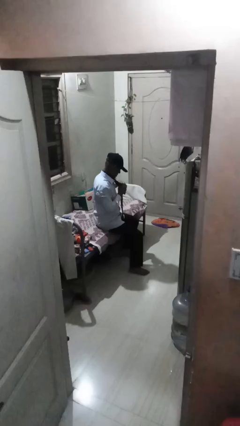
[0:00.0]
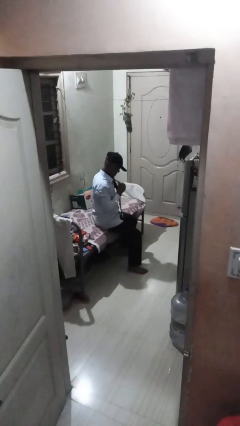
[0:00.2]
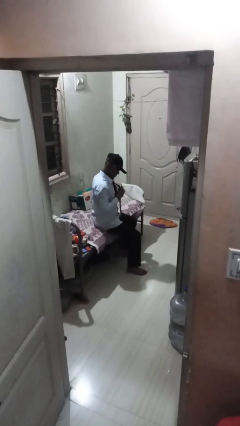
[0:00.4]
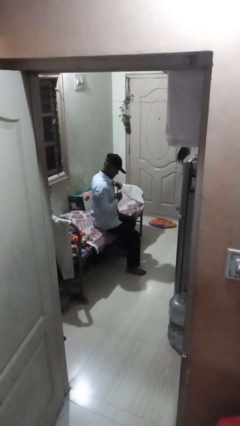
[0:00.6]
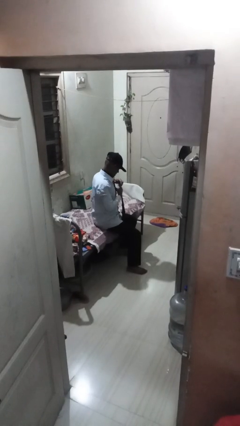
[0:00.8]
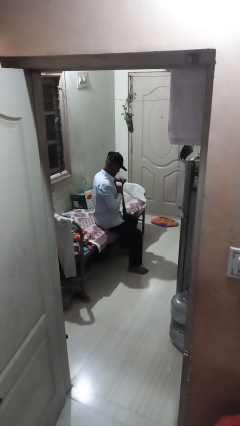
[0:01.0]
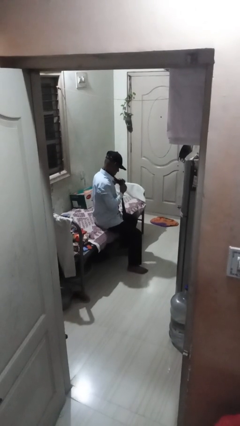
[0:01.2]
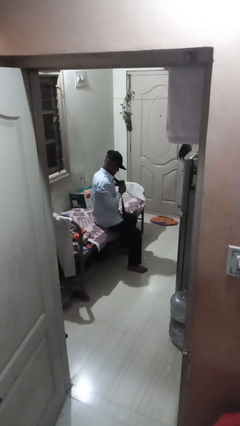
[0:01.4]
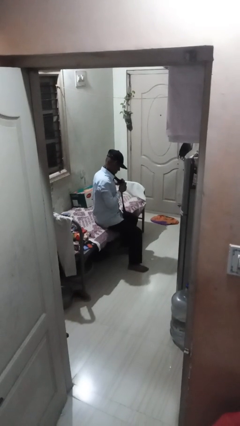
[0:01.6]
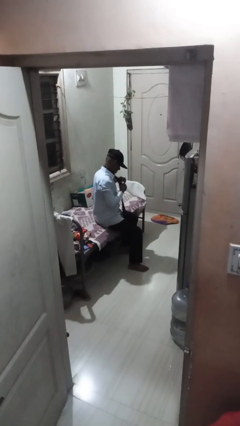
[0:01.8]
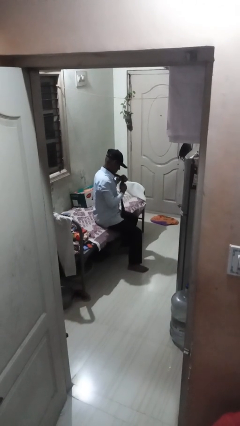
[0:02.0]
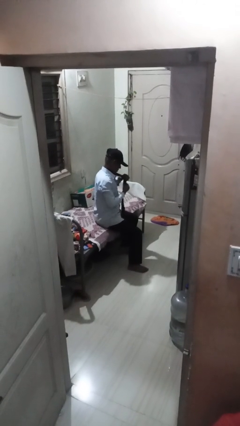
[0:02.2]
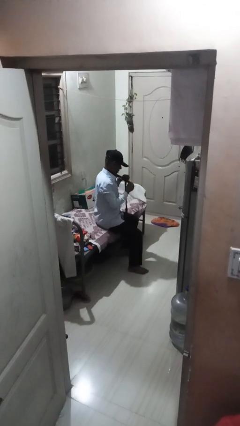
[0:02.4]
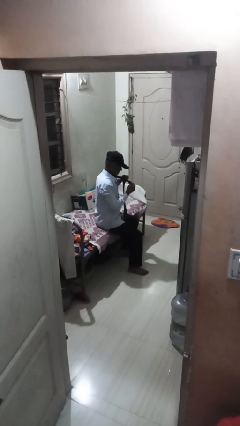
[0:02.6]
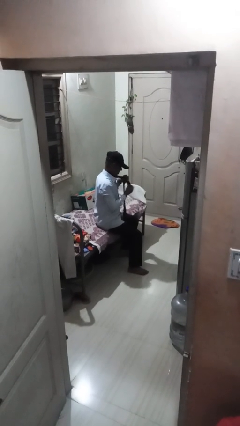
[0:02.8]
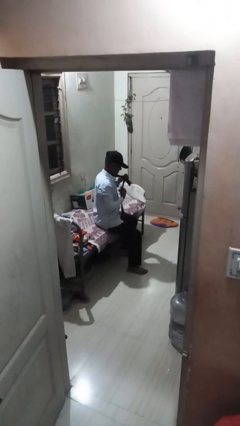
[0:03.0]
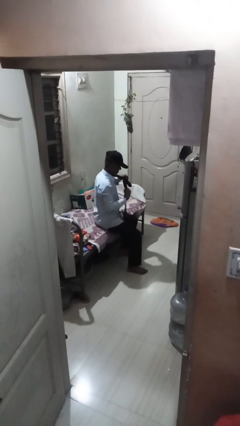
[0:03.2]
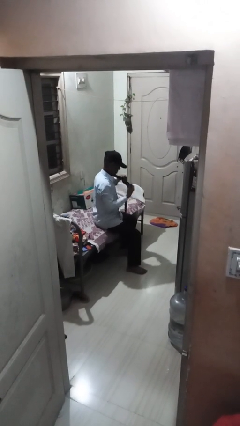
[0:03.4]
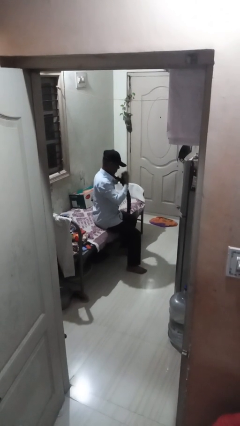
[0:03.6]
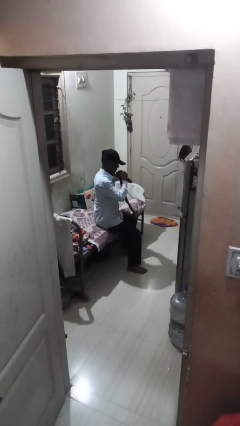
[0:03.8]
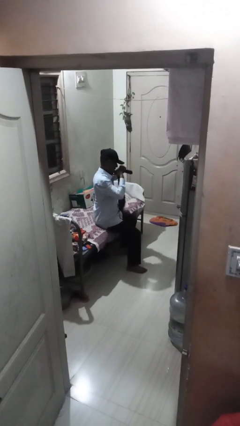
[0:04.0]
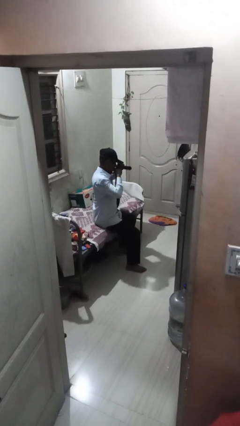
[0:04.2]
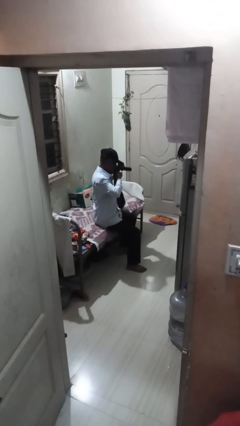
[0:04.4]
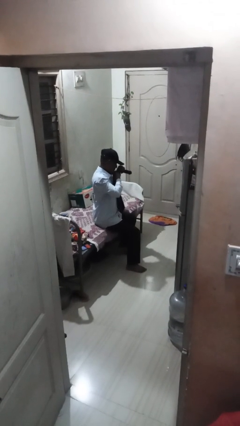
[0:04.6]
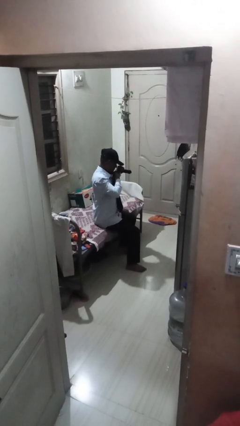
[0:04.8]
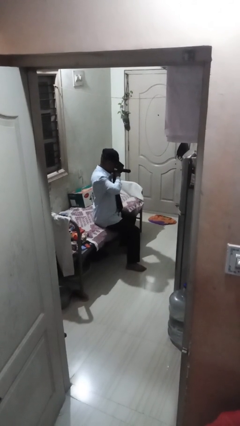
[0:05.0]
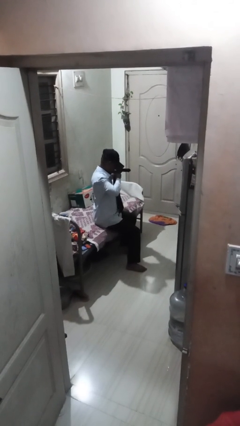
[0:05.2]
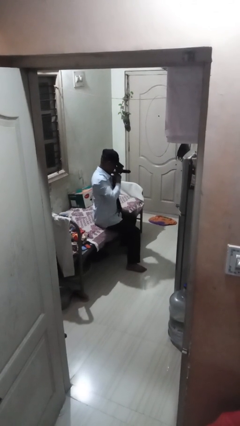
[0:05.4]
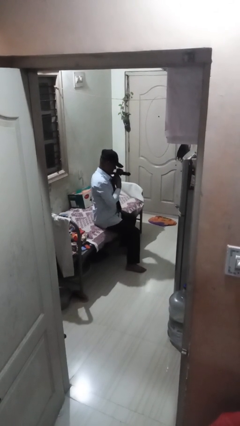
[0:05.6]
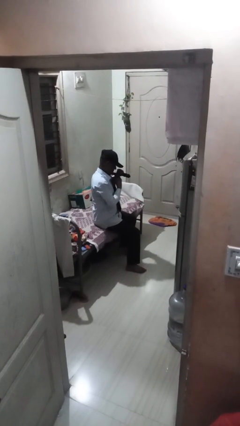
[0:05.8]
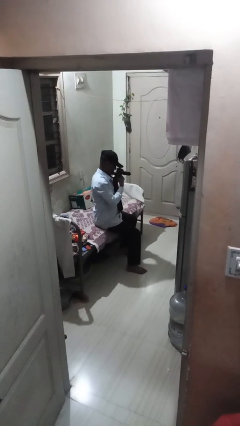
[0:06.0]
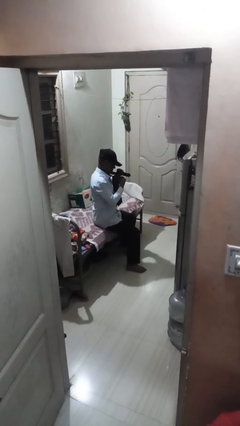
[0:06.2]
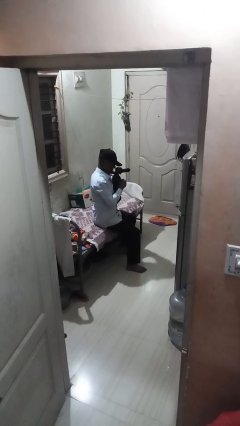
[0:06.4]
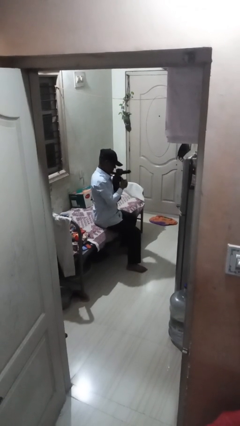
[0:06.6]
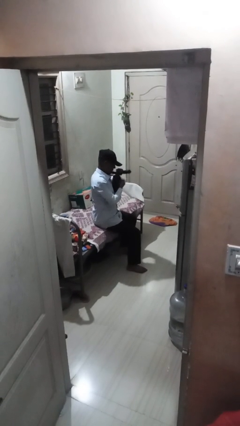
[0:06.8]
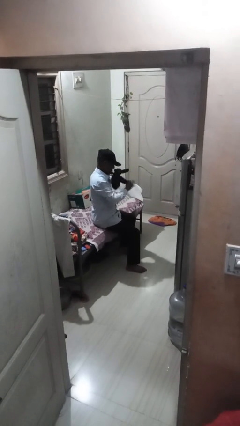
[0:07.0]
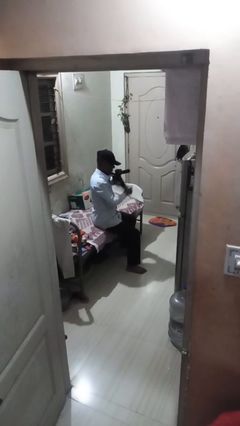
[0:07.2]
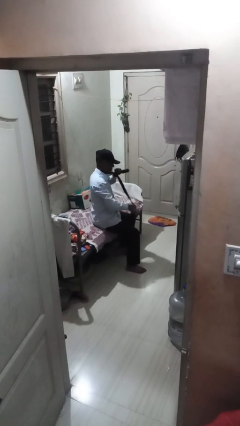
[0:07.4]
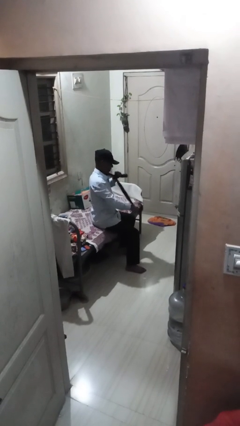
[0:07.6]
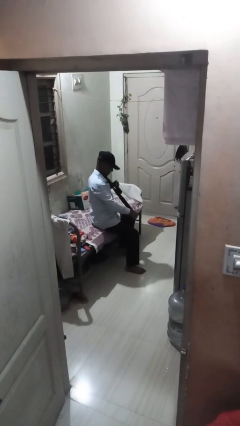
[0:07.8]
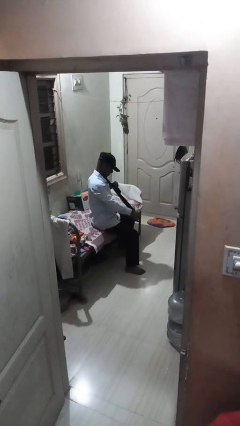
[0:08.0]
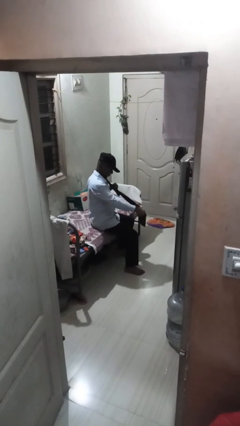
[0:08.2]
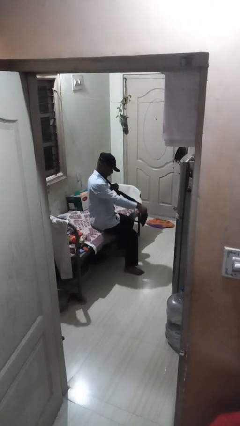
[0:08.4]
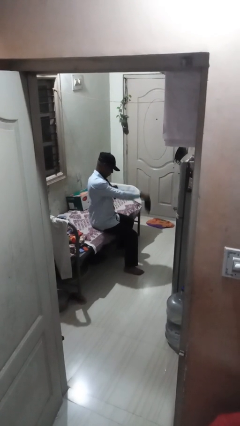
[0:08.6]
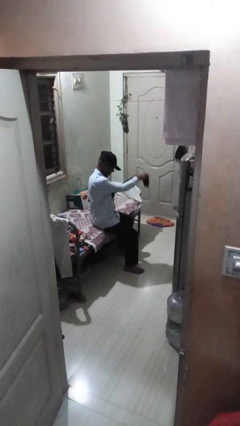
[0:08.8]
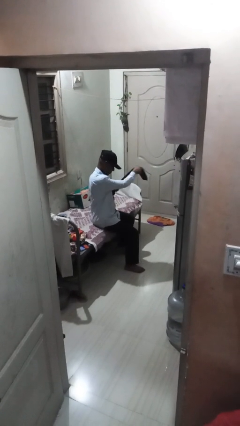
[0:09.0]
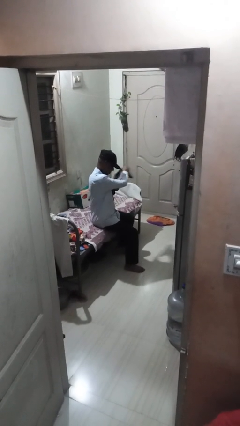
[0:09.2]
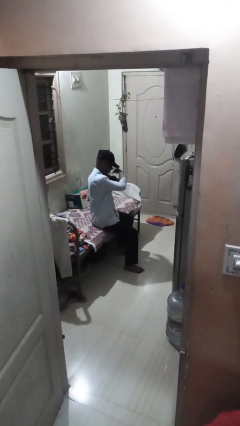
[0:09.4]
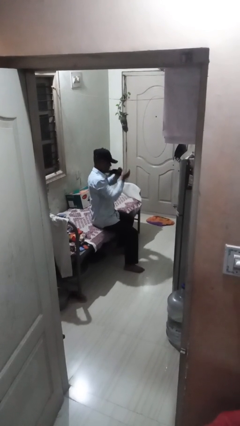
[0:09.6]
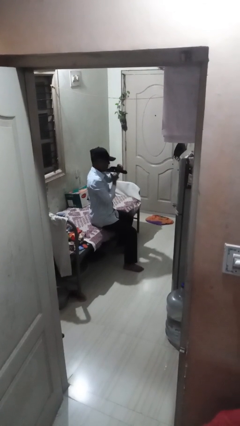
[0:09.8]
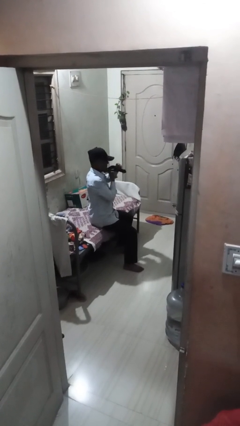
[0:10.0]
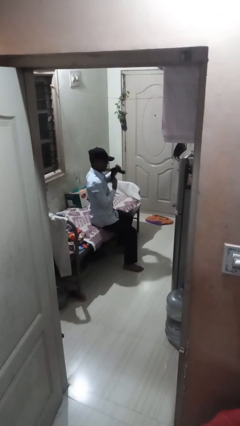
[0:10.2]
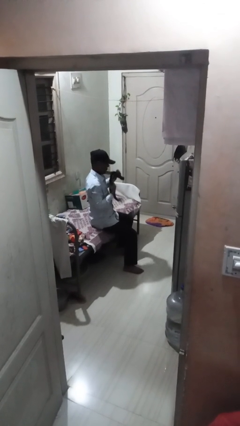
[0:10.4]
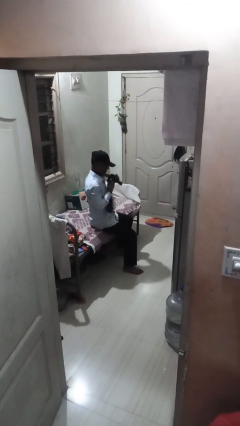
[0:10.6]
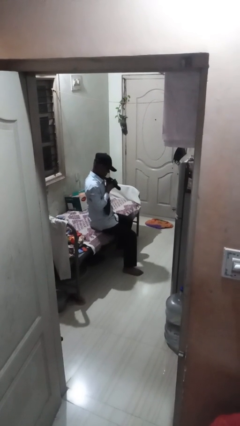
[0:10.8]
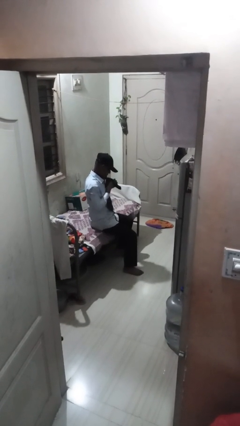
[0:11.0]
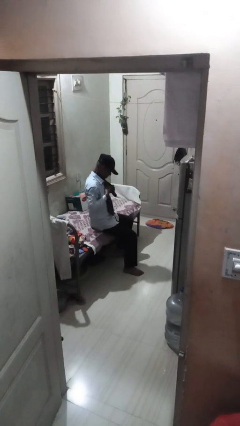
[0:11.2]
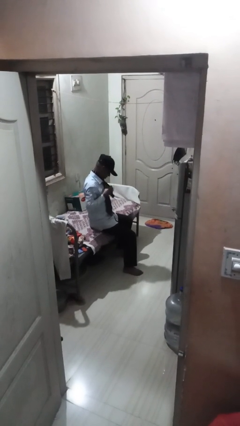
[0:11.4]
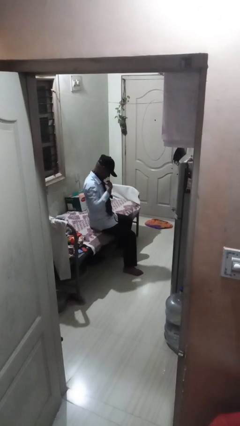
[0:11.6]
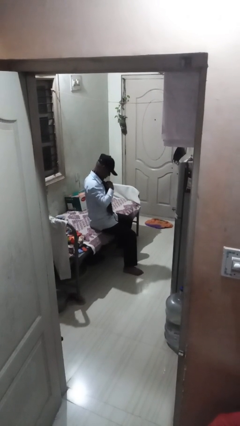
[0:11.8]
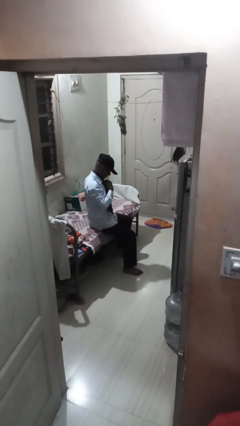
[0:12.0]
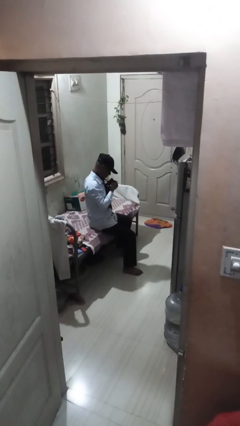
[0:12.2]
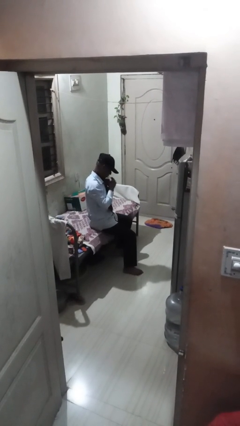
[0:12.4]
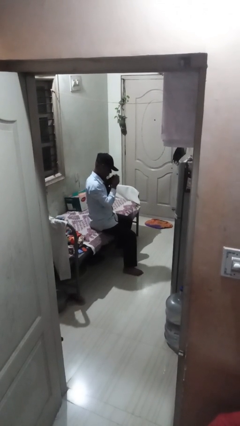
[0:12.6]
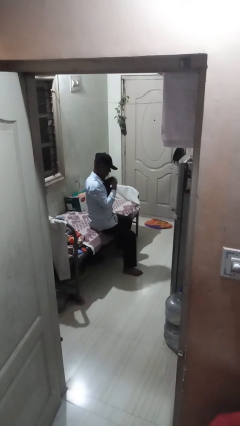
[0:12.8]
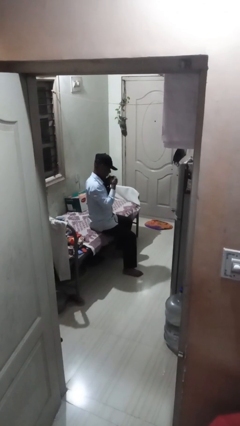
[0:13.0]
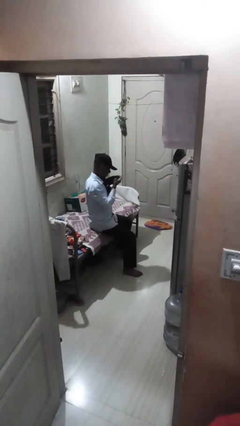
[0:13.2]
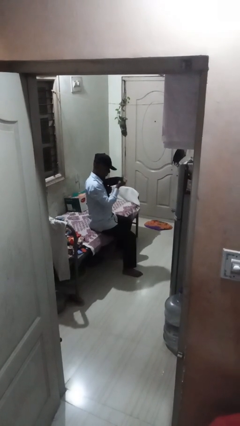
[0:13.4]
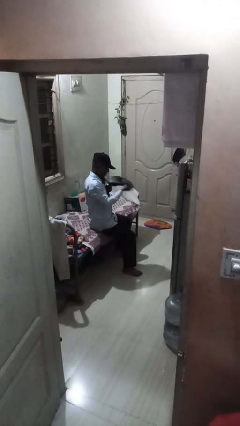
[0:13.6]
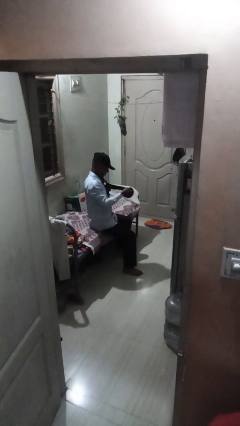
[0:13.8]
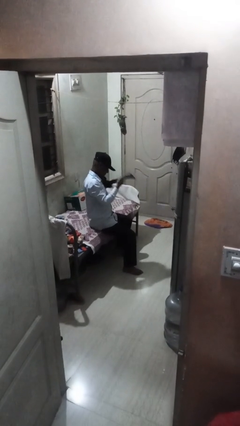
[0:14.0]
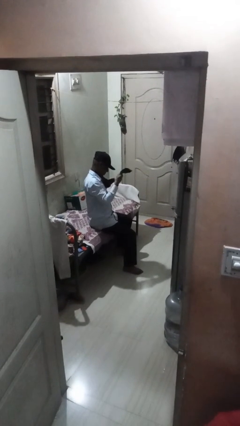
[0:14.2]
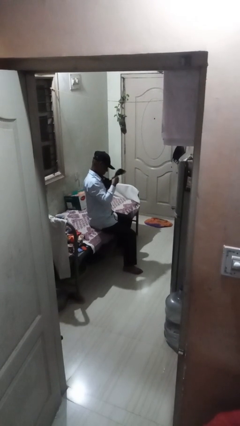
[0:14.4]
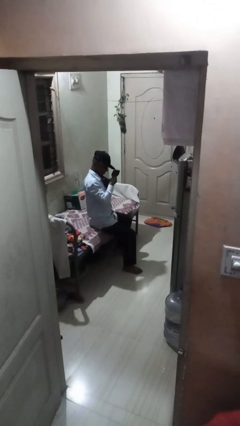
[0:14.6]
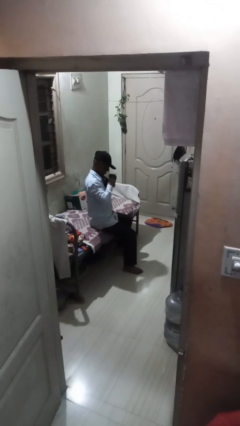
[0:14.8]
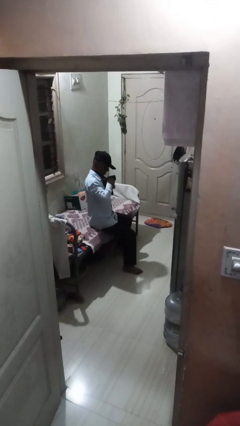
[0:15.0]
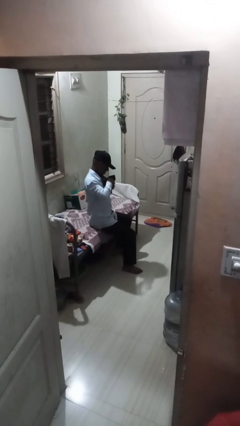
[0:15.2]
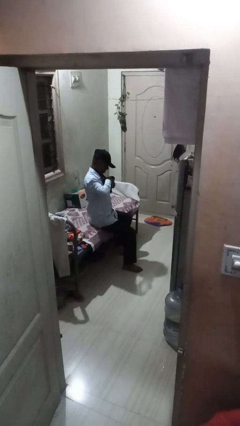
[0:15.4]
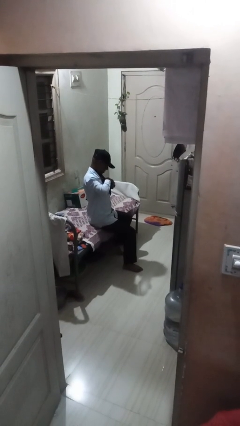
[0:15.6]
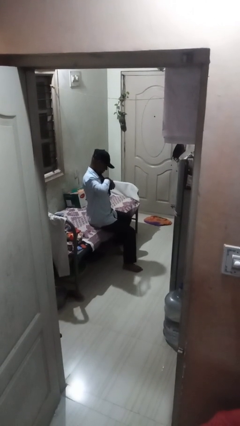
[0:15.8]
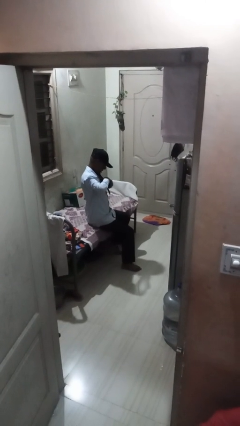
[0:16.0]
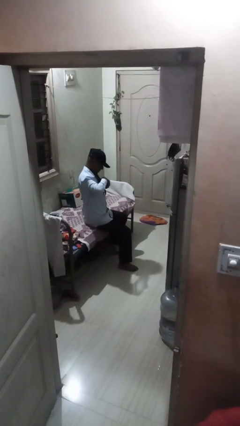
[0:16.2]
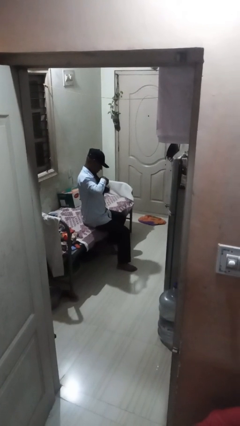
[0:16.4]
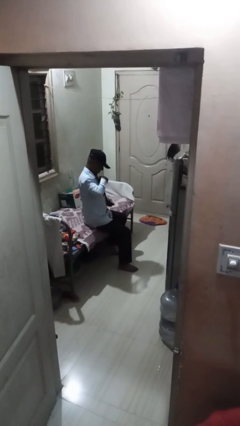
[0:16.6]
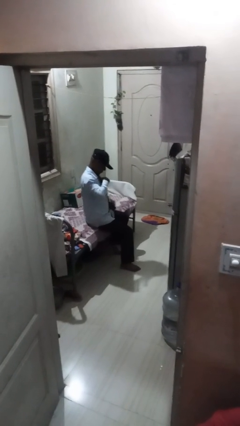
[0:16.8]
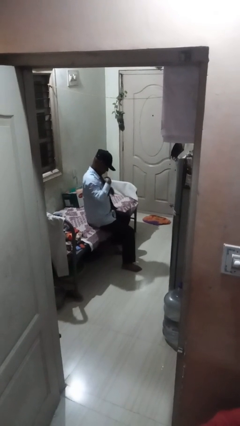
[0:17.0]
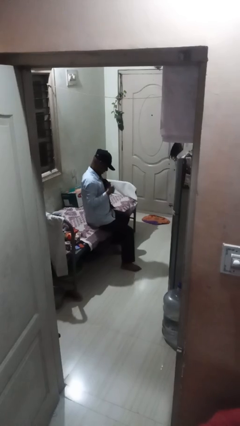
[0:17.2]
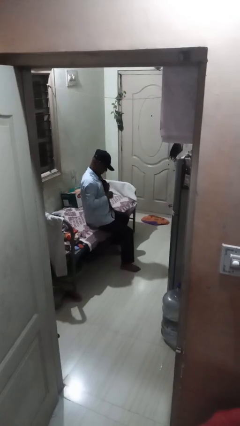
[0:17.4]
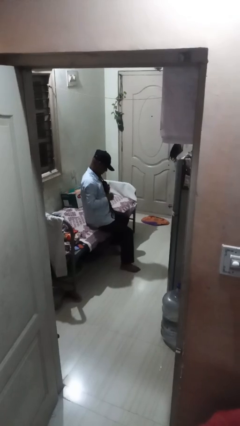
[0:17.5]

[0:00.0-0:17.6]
person puts on necktie

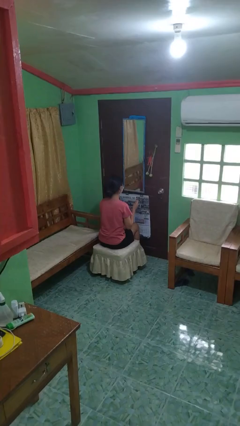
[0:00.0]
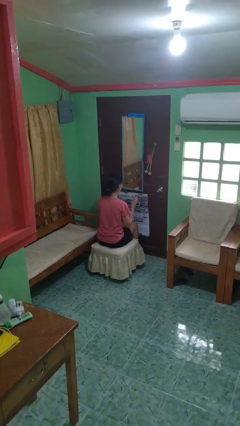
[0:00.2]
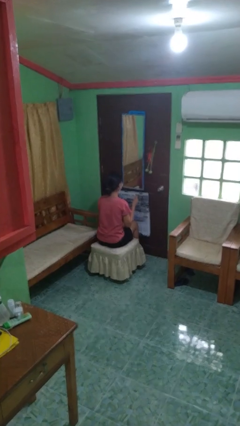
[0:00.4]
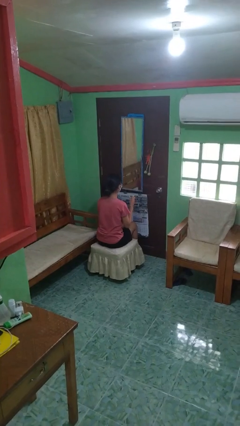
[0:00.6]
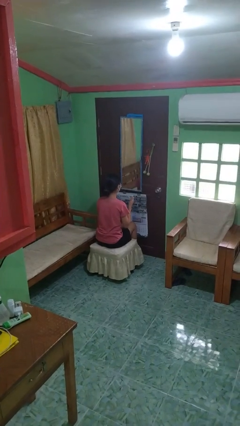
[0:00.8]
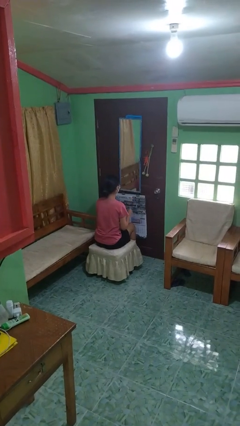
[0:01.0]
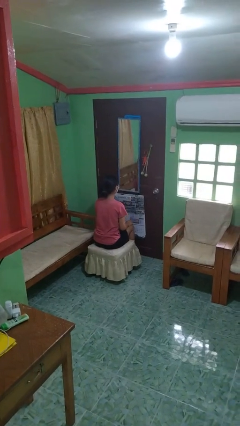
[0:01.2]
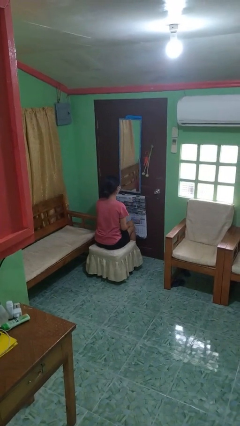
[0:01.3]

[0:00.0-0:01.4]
person snaps fingers
